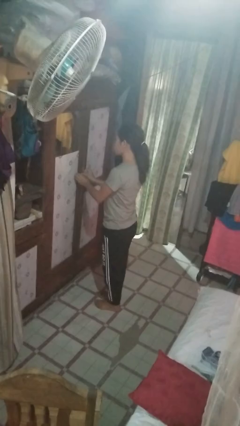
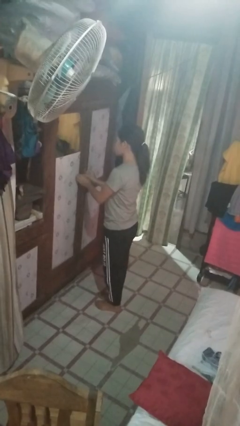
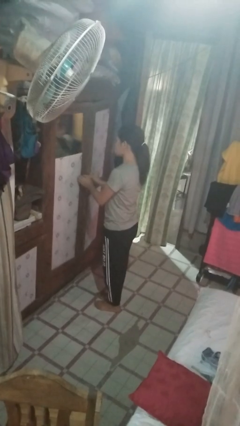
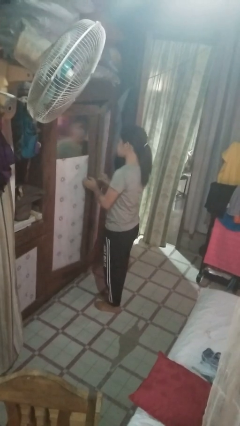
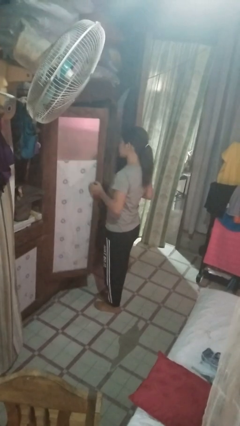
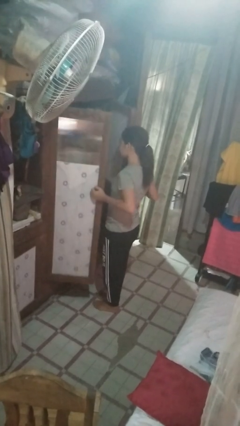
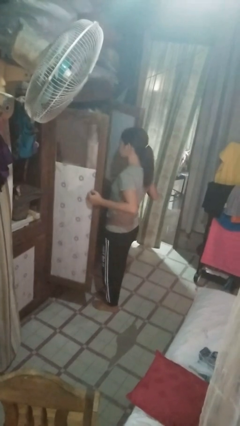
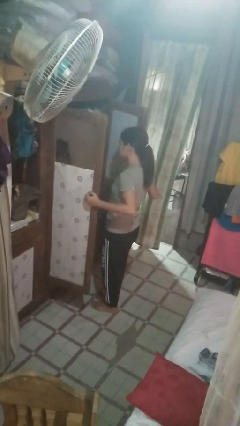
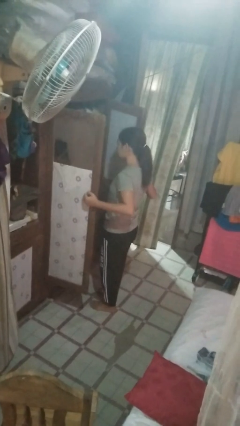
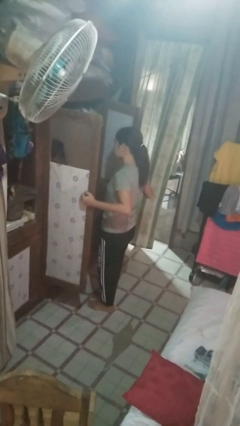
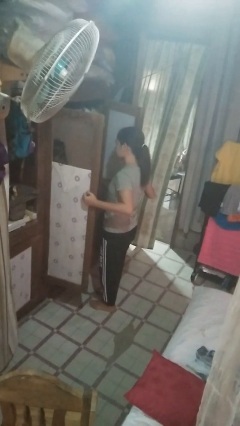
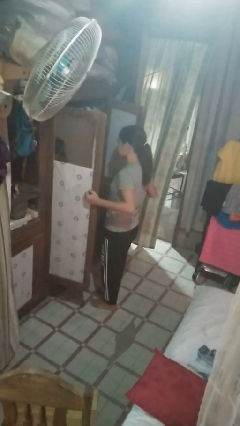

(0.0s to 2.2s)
person opens closet door

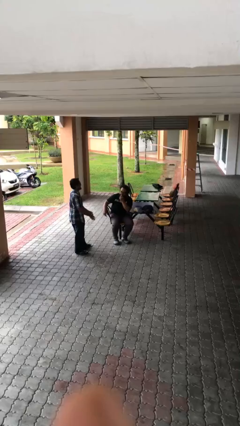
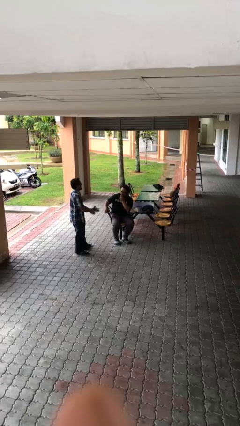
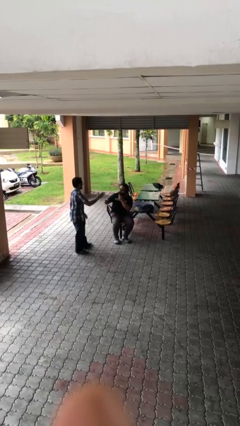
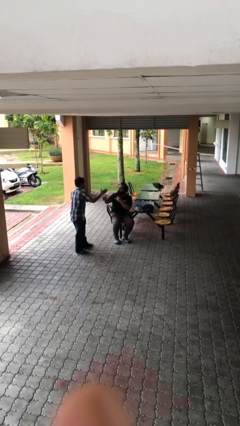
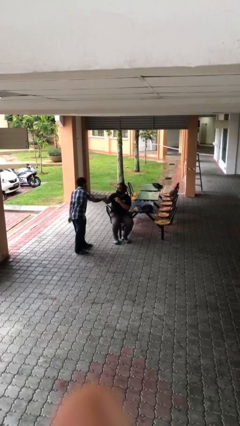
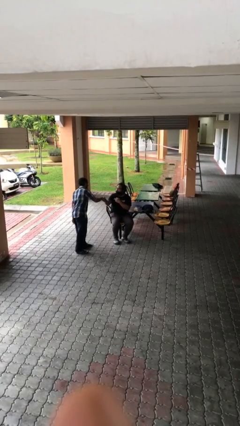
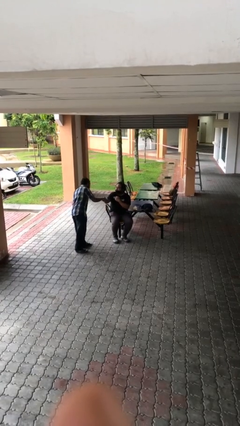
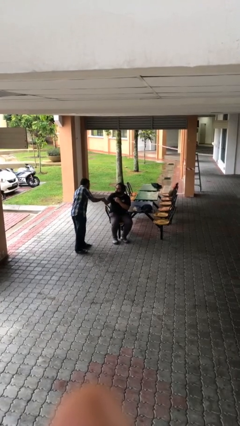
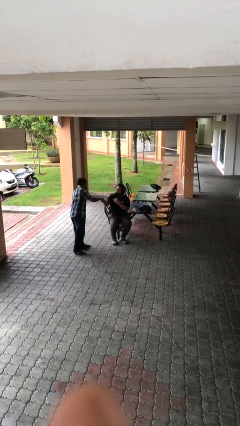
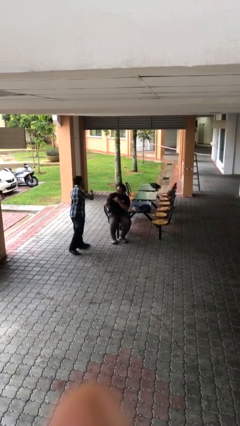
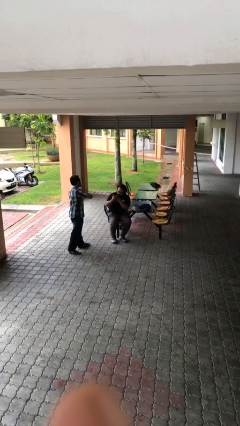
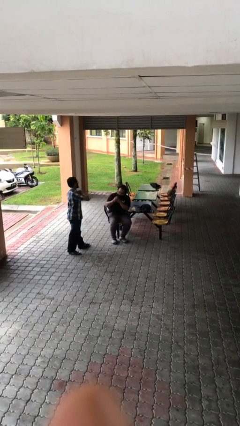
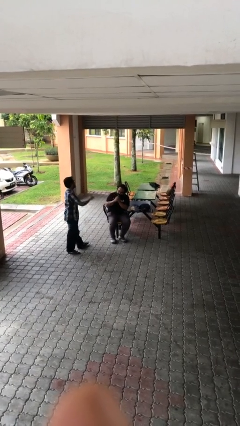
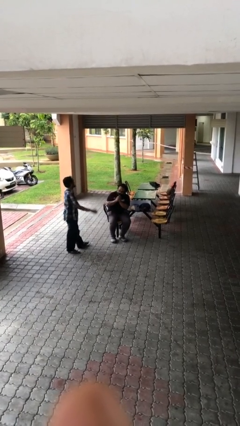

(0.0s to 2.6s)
person shakes hand

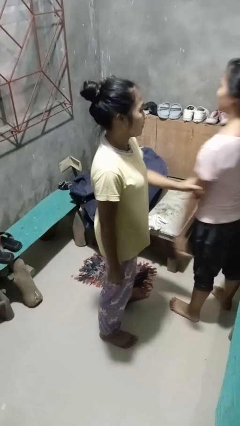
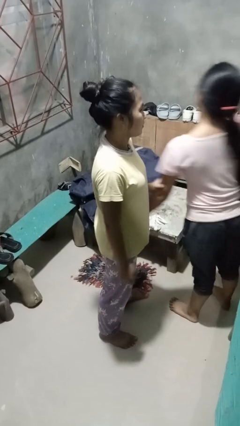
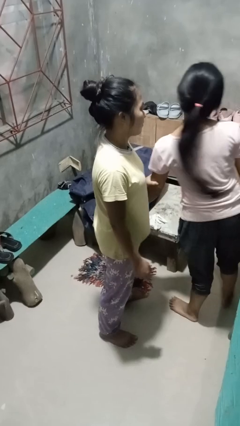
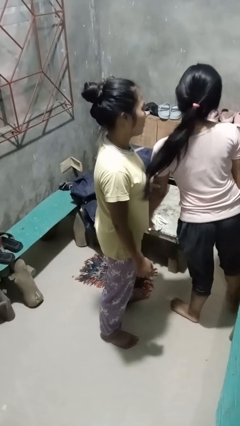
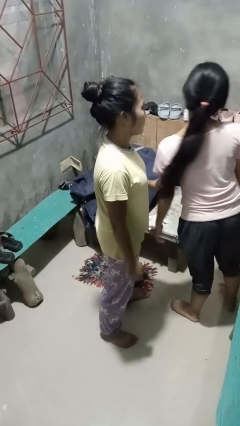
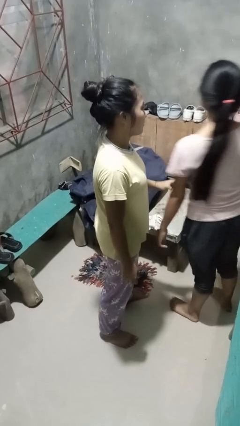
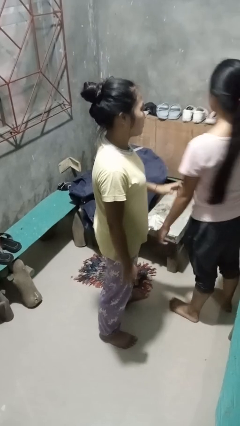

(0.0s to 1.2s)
person grabs person by bicep

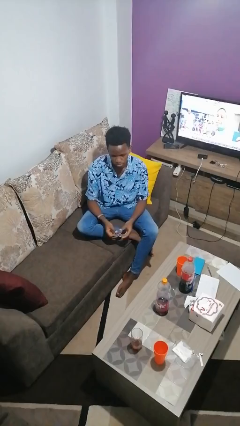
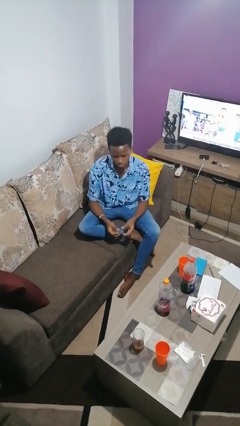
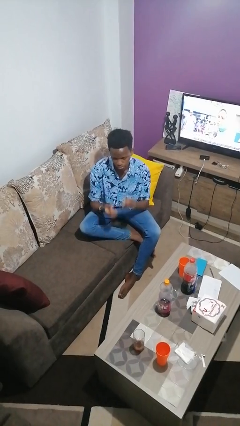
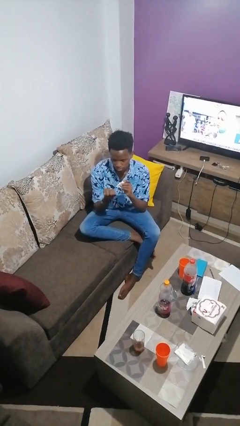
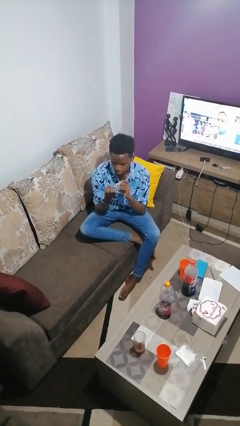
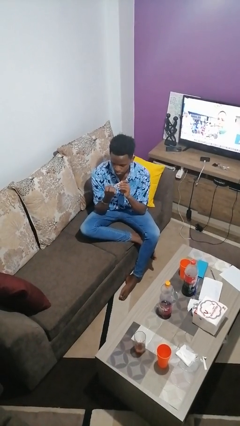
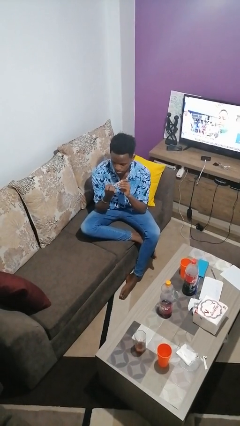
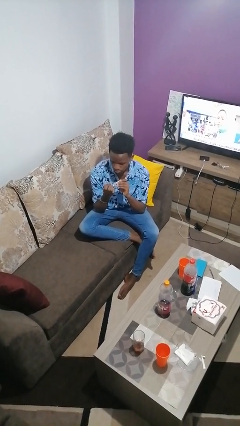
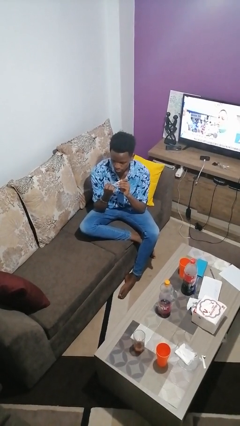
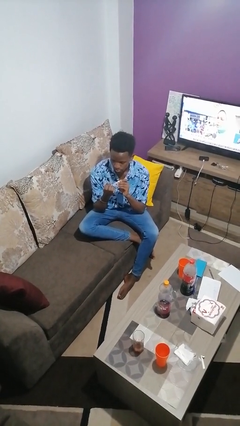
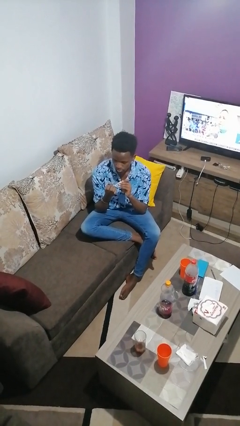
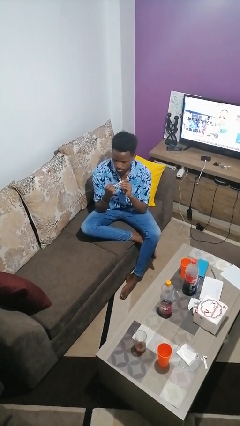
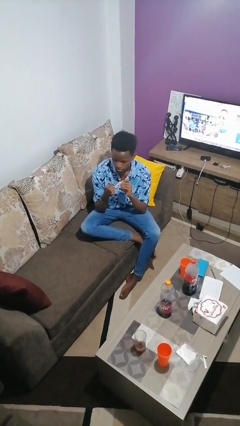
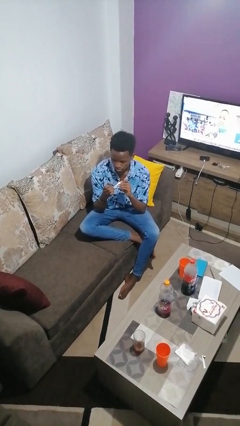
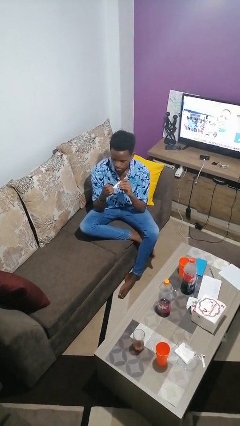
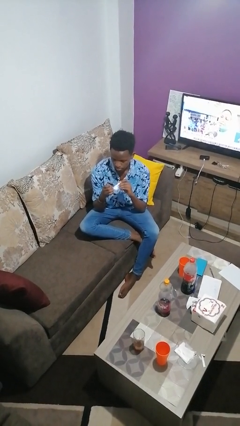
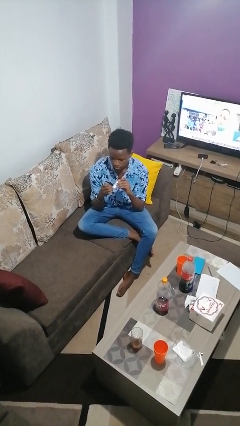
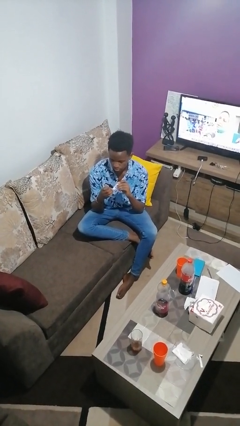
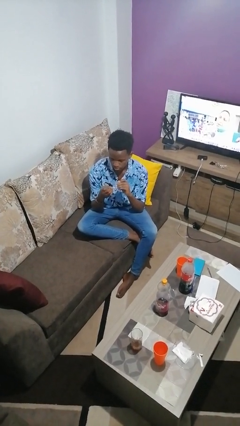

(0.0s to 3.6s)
person clips fingernails

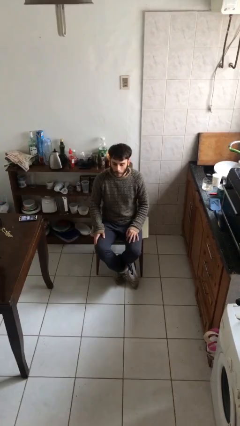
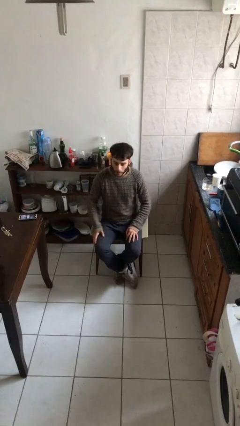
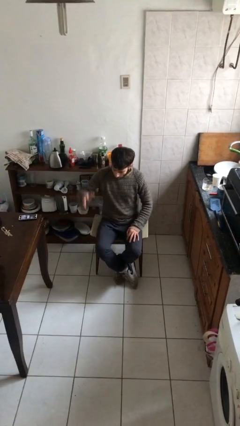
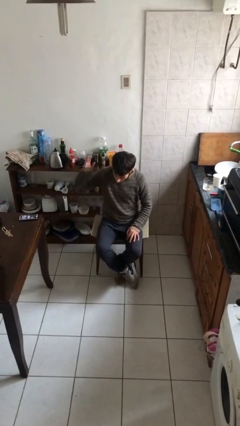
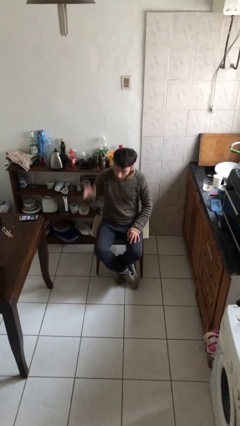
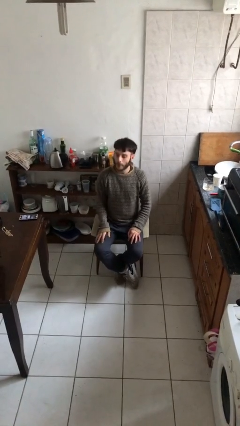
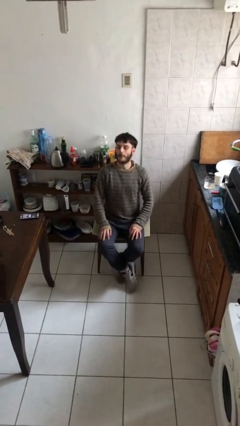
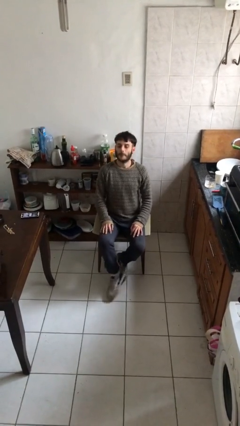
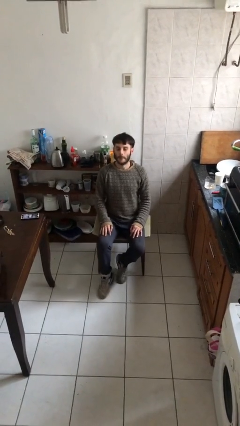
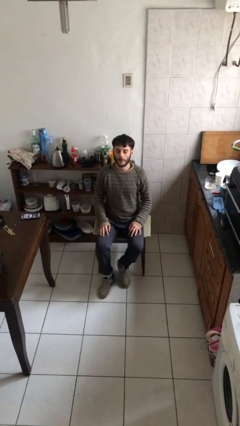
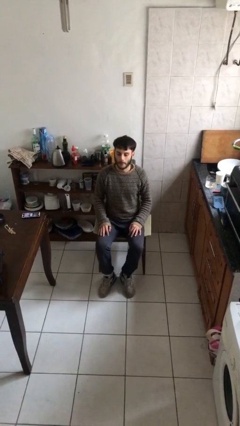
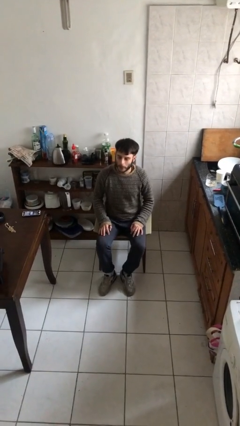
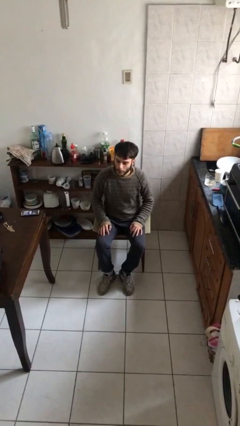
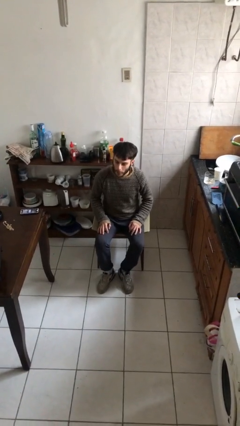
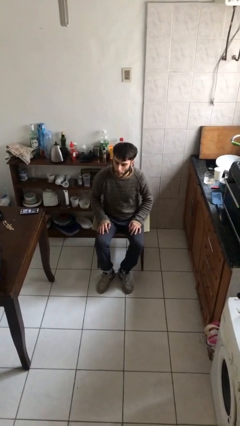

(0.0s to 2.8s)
person slaps hands on thighs

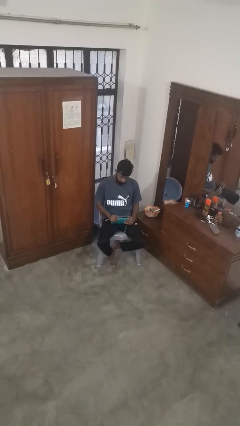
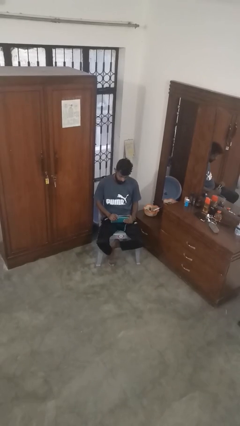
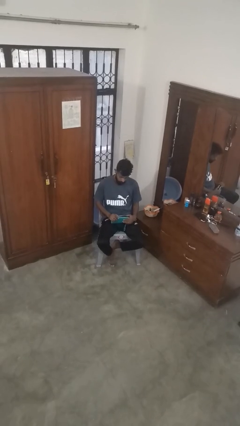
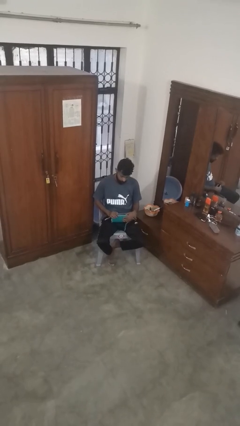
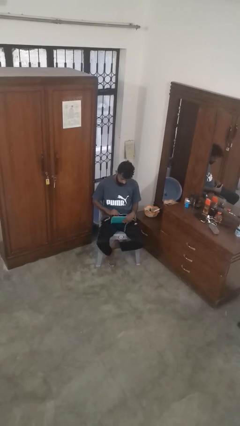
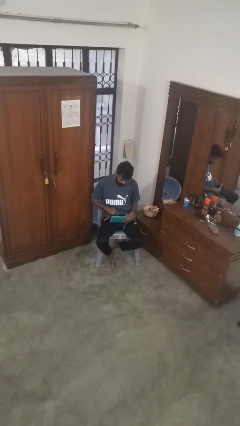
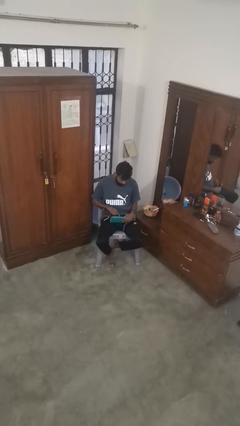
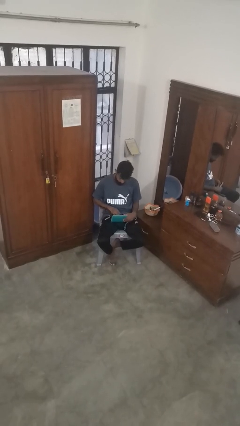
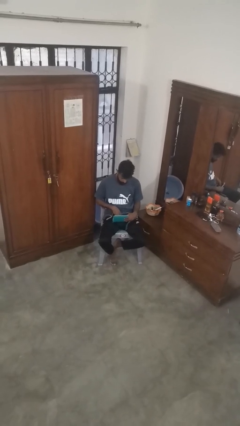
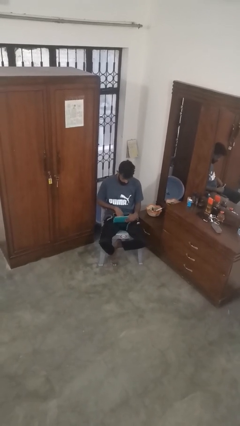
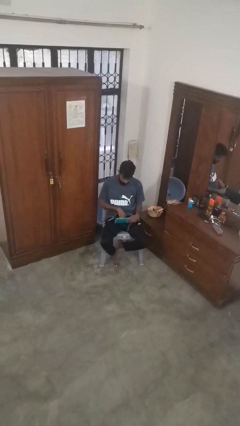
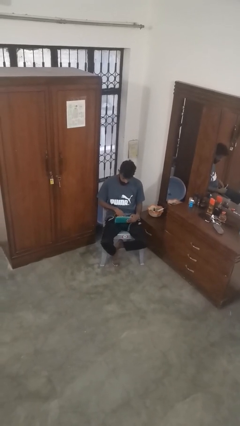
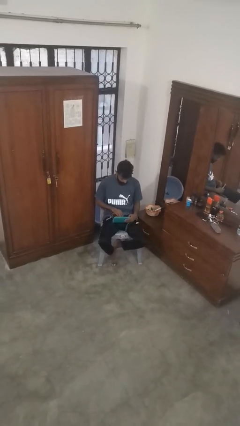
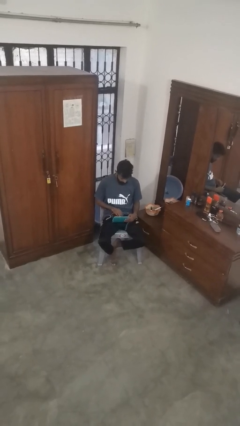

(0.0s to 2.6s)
person searches in purse

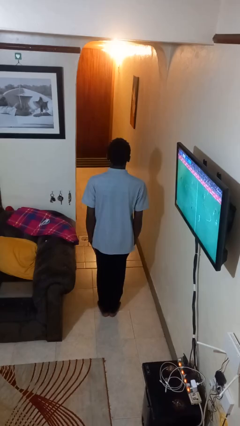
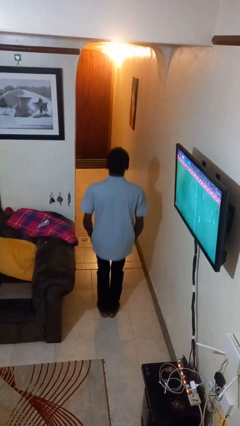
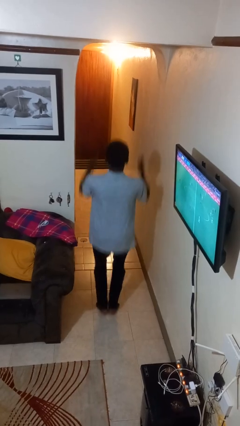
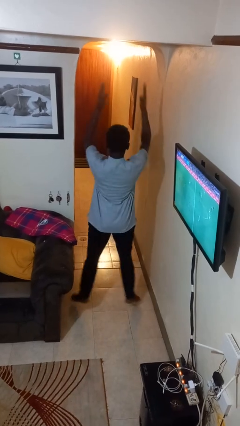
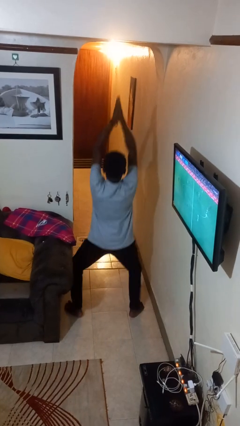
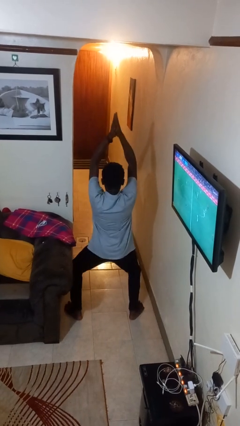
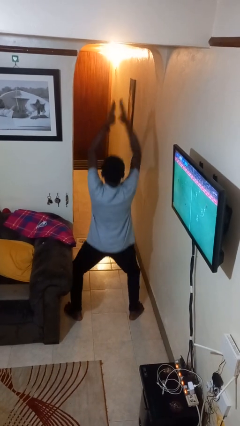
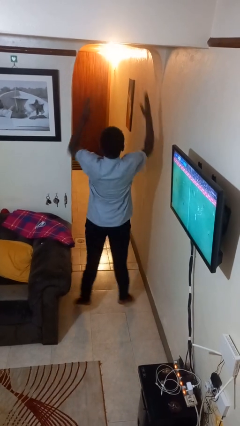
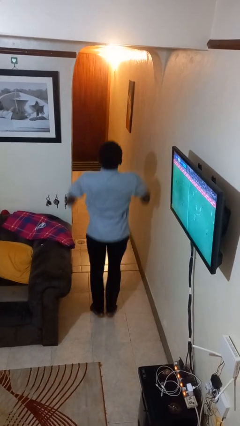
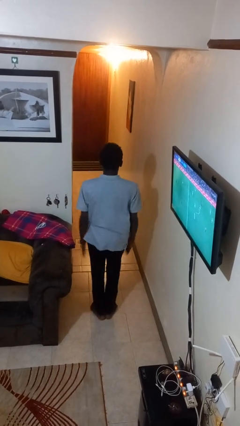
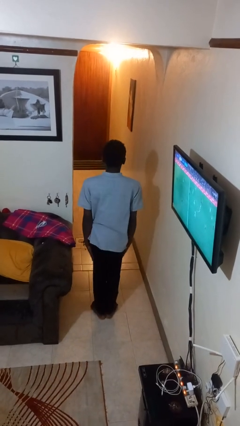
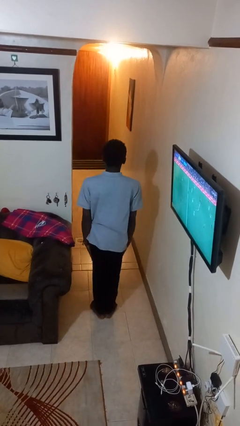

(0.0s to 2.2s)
person exercises with jumping jacks

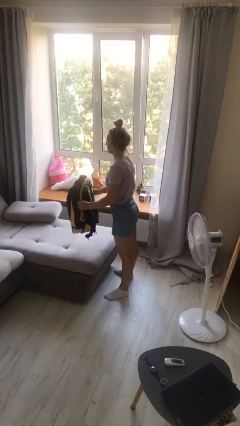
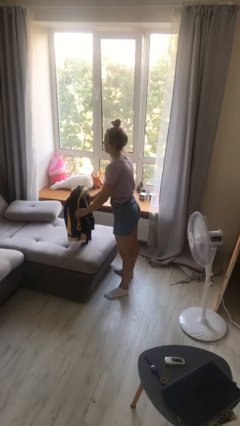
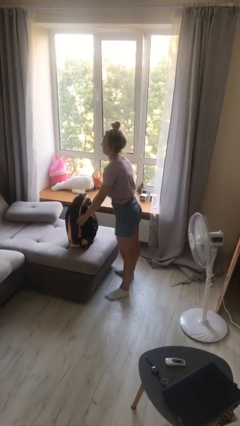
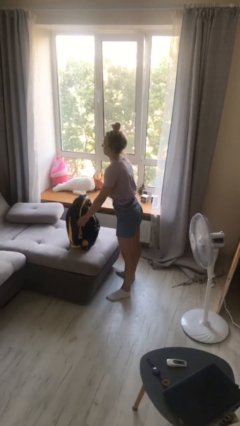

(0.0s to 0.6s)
person puts down object on bed
